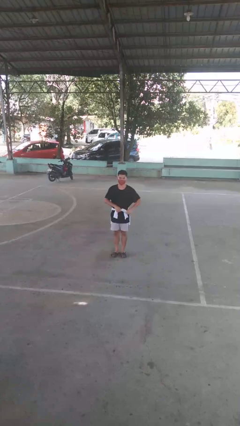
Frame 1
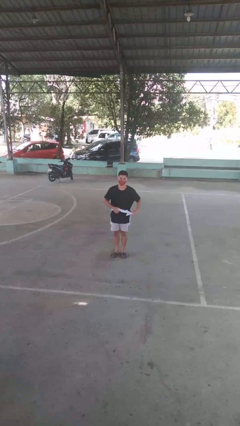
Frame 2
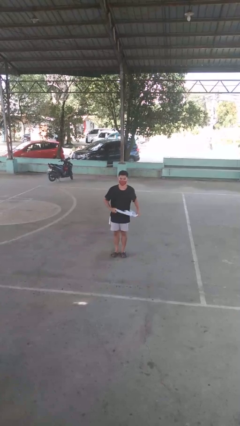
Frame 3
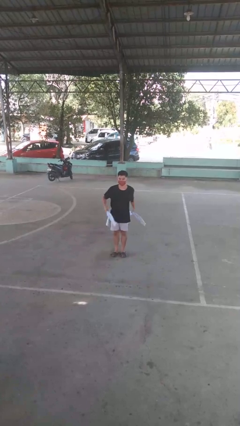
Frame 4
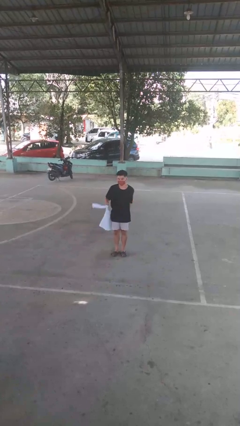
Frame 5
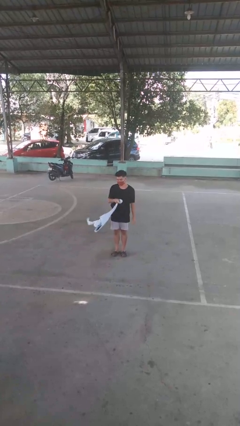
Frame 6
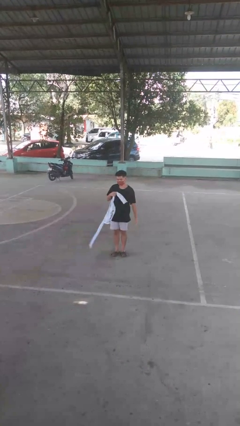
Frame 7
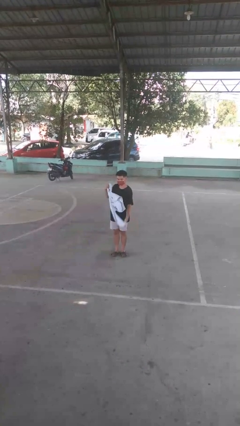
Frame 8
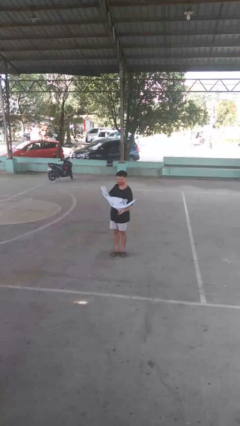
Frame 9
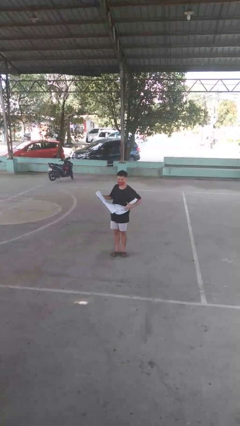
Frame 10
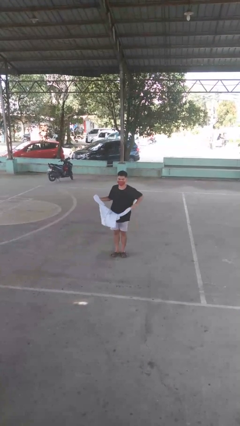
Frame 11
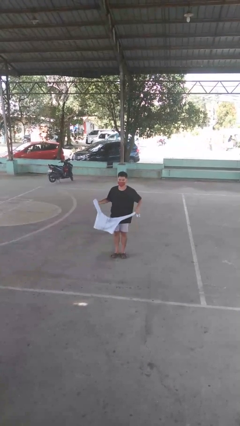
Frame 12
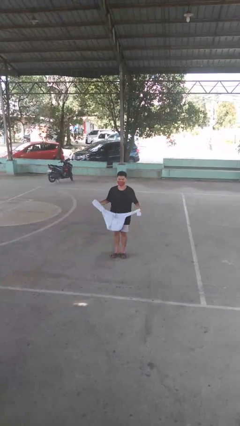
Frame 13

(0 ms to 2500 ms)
person unties jacket around waist

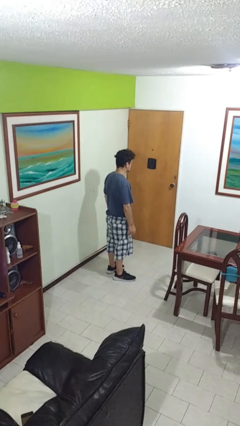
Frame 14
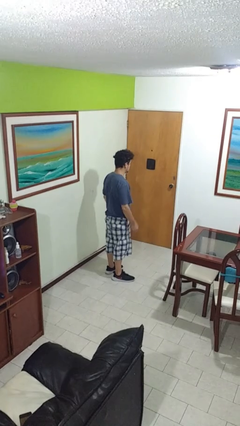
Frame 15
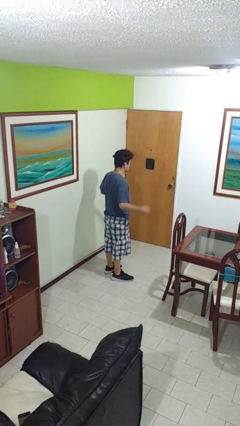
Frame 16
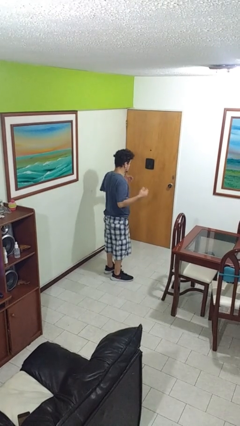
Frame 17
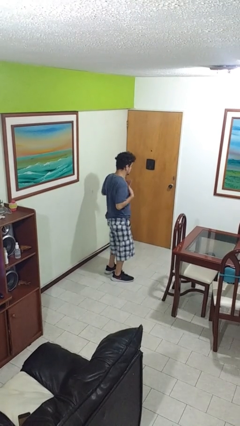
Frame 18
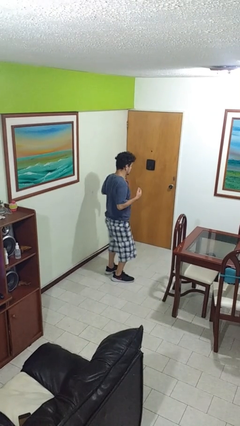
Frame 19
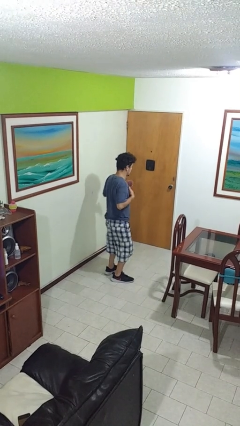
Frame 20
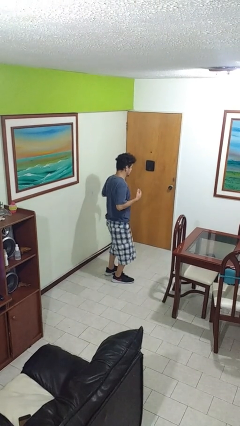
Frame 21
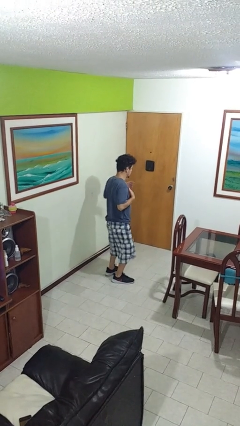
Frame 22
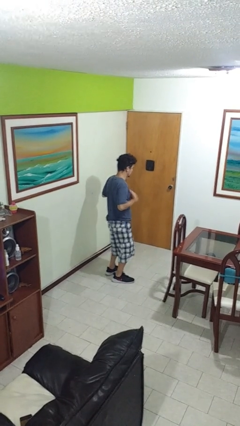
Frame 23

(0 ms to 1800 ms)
person drums on chest

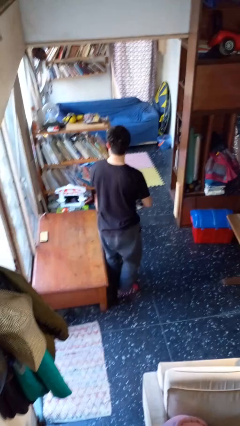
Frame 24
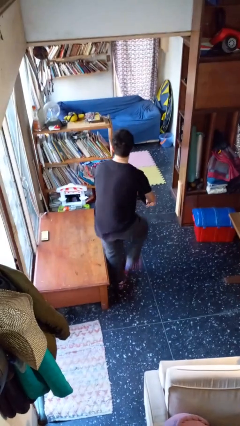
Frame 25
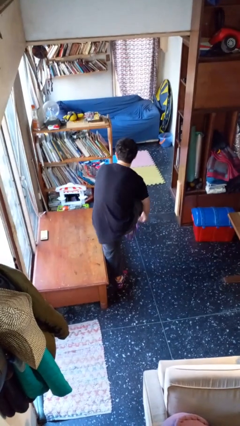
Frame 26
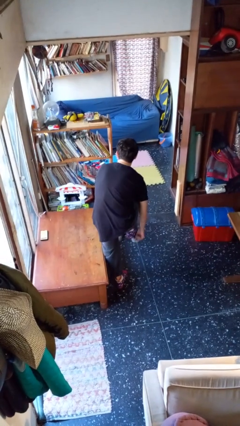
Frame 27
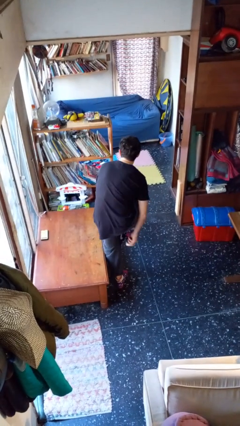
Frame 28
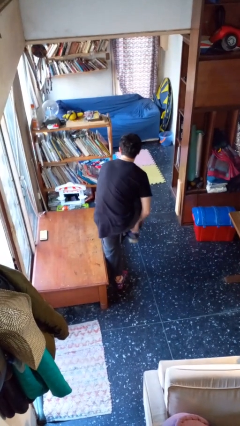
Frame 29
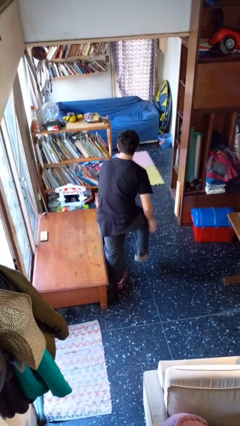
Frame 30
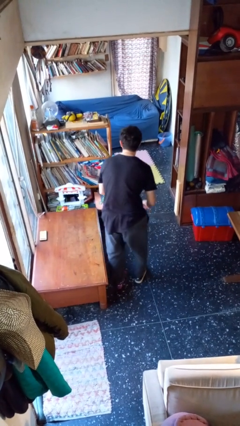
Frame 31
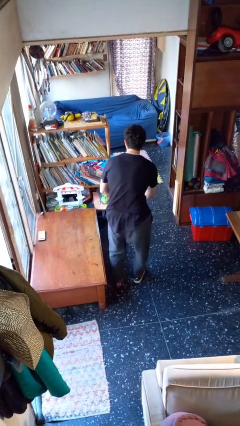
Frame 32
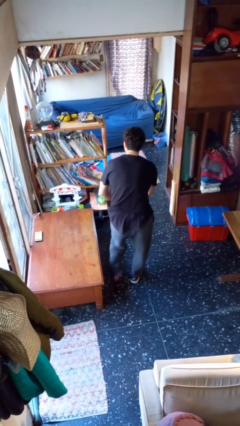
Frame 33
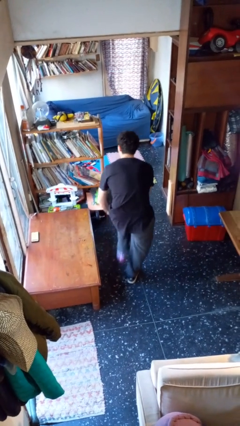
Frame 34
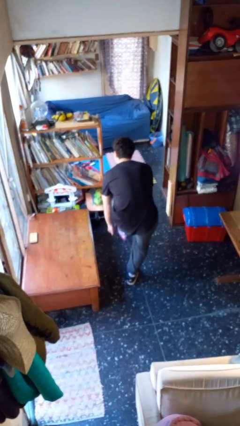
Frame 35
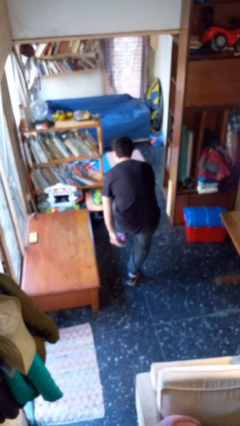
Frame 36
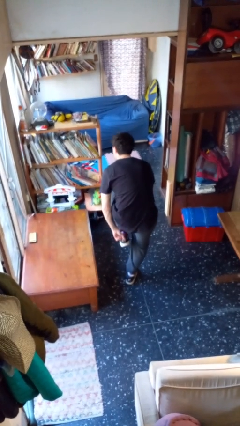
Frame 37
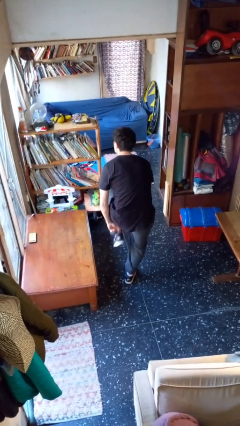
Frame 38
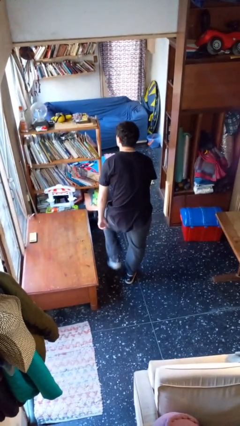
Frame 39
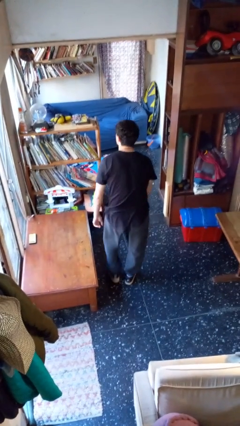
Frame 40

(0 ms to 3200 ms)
person puts on shoes

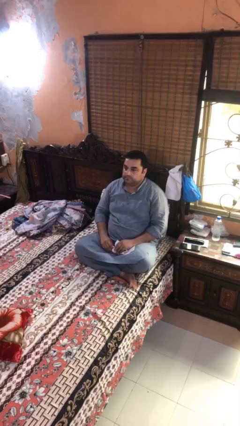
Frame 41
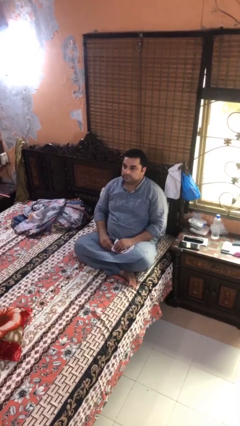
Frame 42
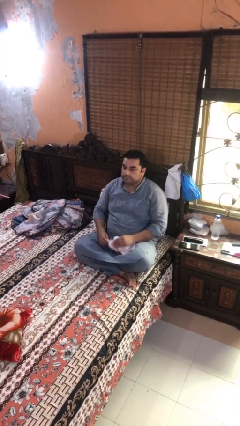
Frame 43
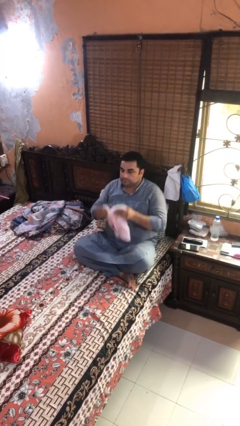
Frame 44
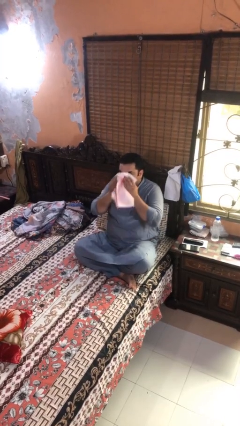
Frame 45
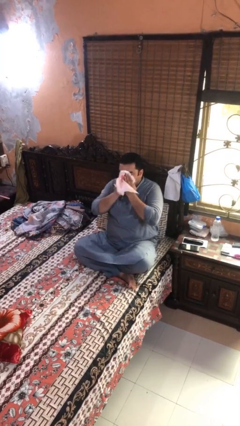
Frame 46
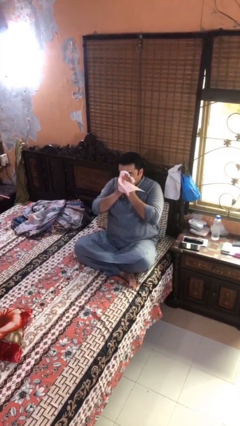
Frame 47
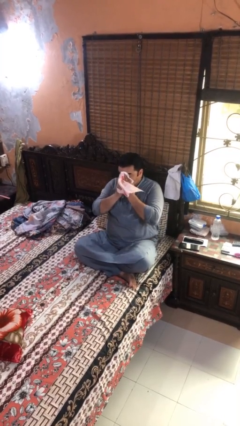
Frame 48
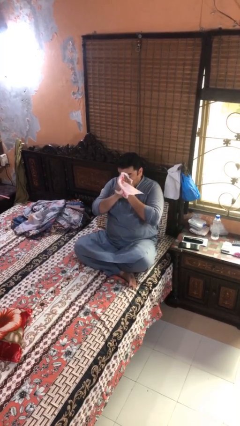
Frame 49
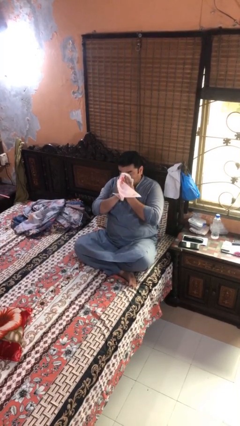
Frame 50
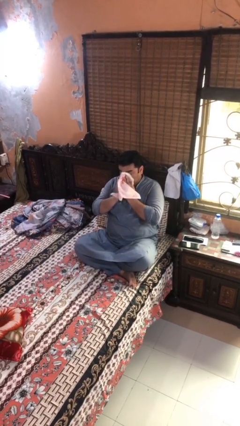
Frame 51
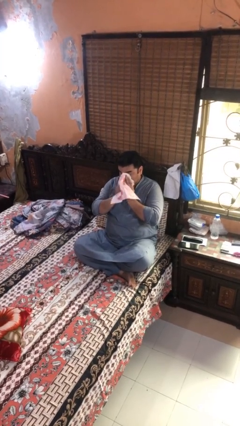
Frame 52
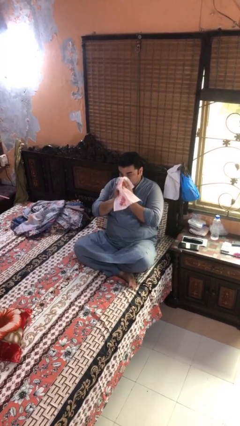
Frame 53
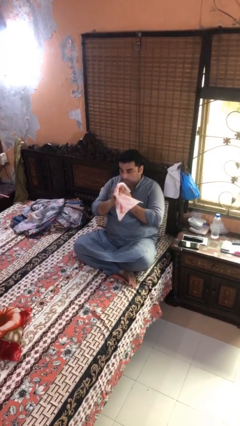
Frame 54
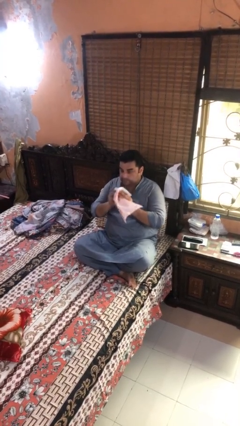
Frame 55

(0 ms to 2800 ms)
person wipes mouth with napkin

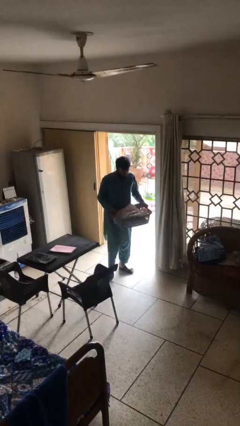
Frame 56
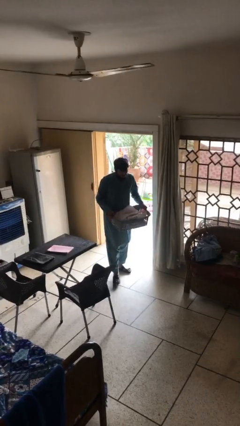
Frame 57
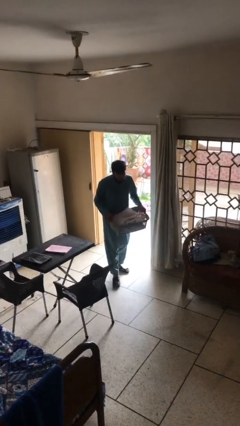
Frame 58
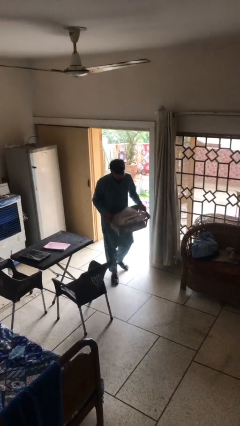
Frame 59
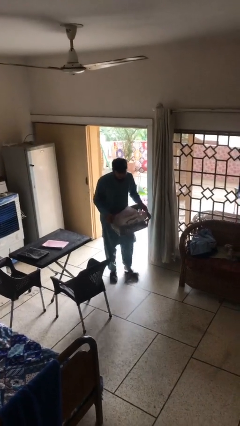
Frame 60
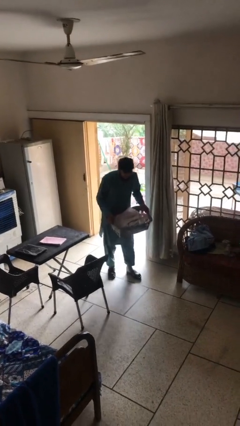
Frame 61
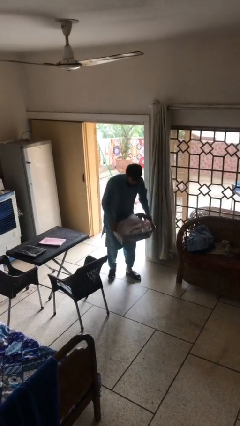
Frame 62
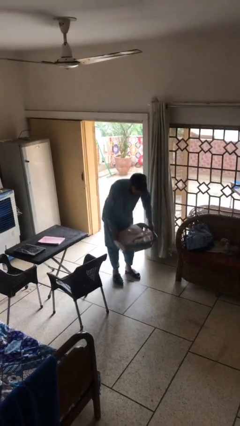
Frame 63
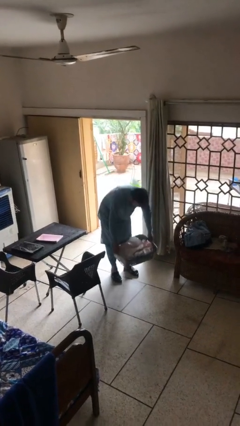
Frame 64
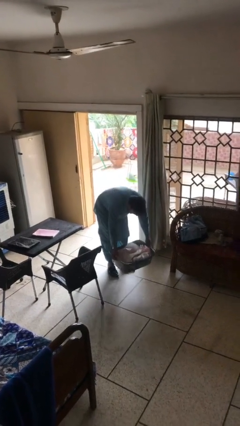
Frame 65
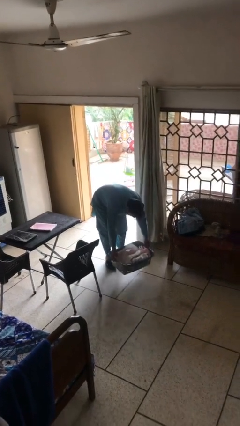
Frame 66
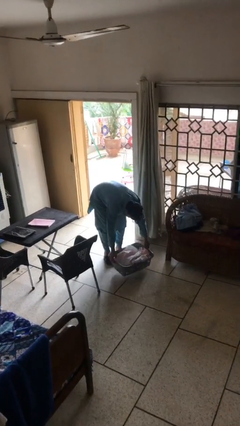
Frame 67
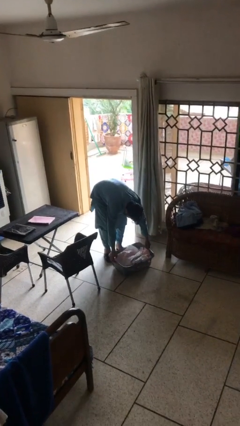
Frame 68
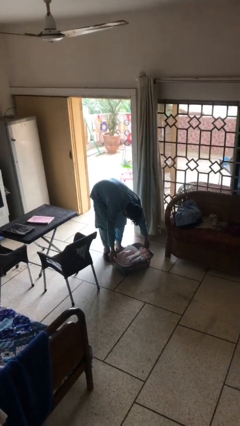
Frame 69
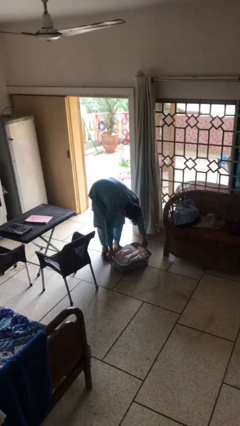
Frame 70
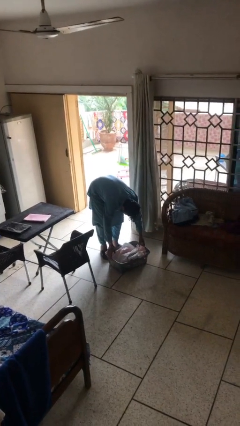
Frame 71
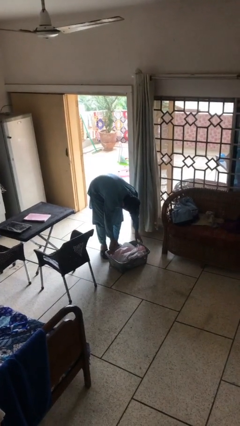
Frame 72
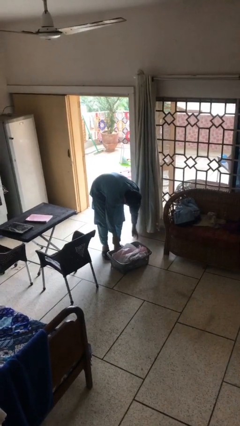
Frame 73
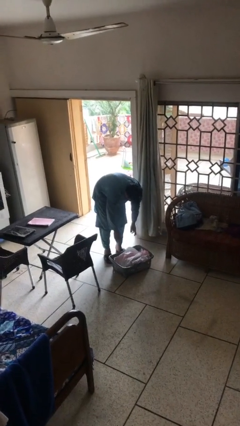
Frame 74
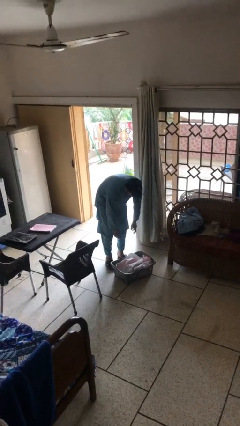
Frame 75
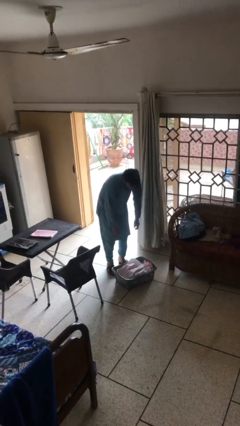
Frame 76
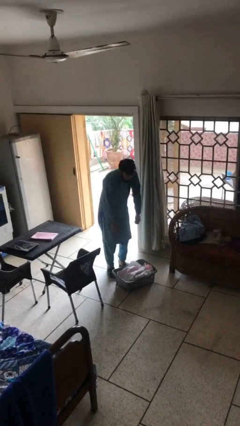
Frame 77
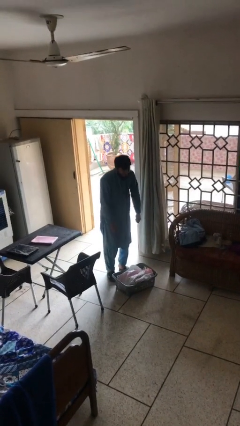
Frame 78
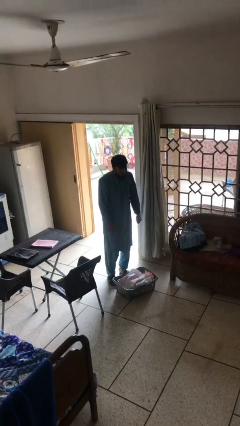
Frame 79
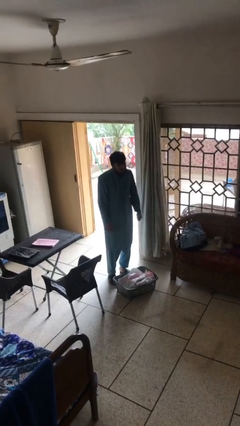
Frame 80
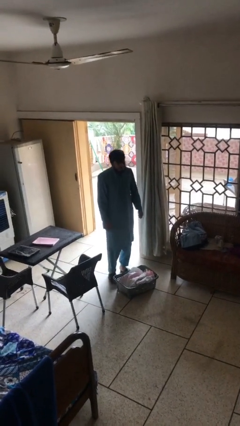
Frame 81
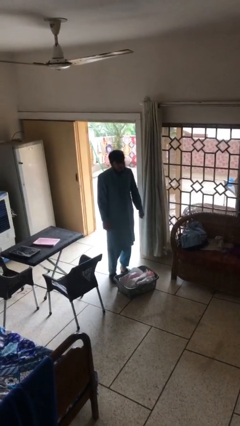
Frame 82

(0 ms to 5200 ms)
person puts down object on floor

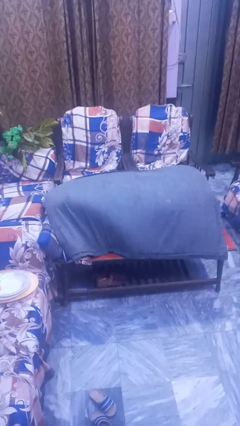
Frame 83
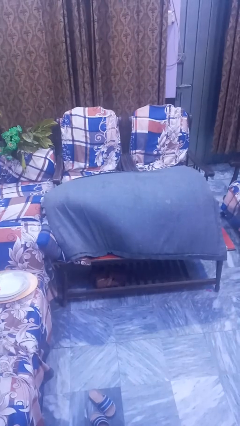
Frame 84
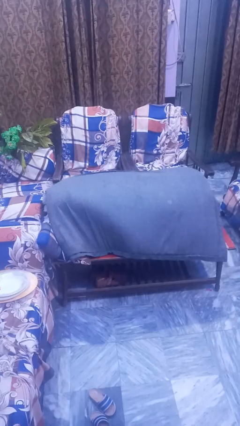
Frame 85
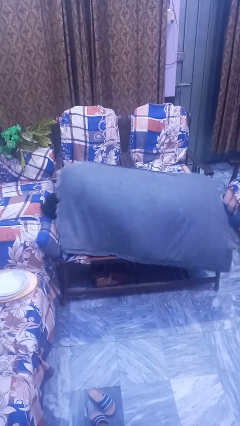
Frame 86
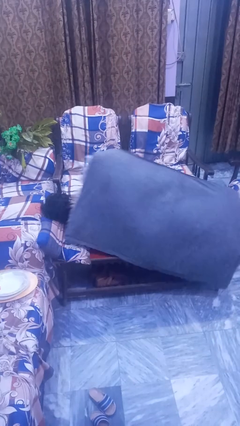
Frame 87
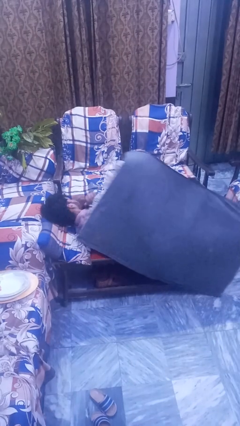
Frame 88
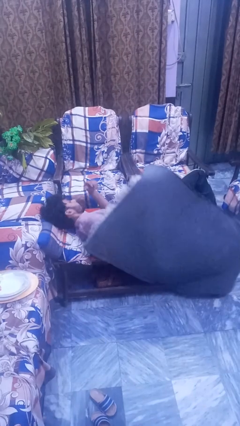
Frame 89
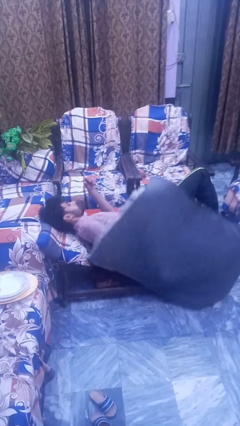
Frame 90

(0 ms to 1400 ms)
person uncovers with blanket

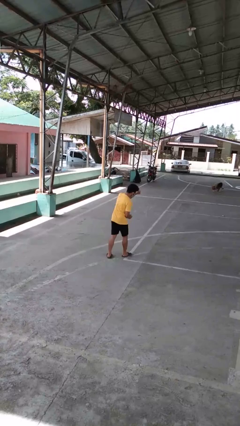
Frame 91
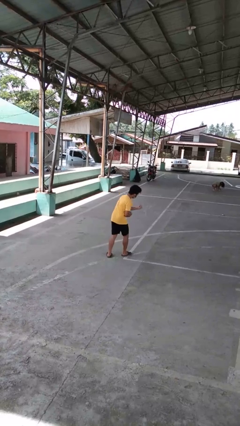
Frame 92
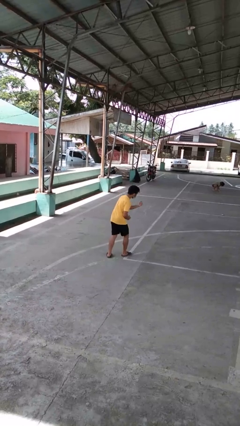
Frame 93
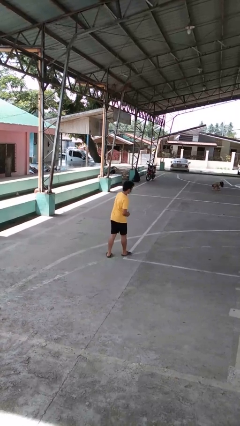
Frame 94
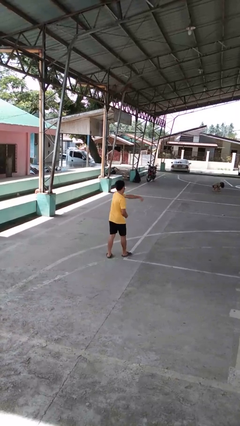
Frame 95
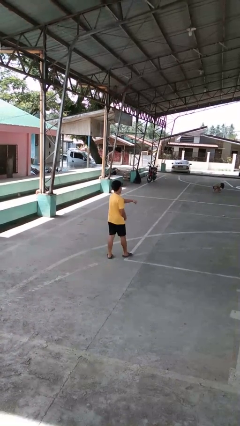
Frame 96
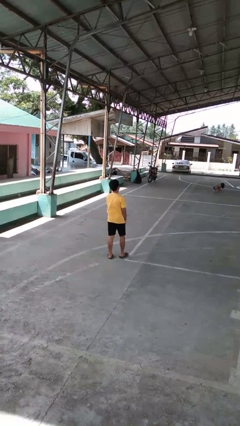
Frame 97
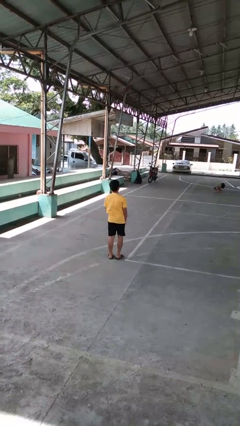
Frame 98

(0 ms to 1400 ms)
person punches
